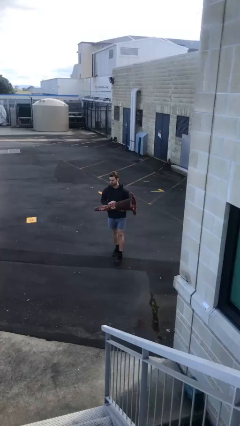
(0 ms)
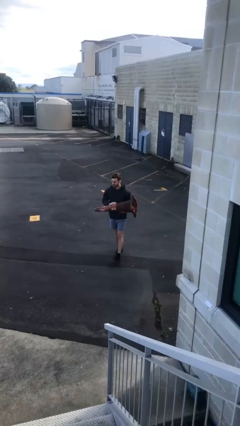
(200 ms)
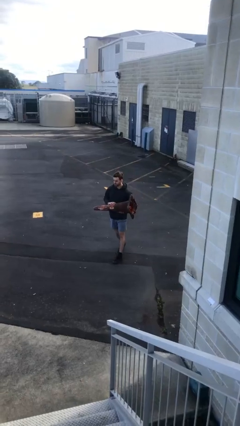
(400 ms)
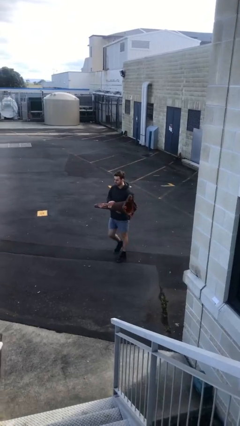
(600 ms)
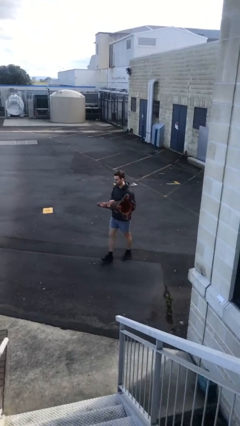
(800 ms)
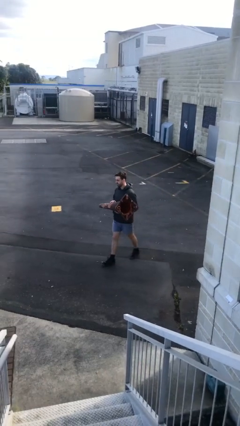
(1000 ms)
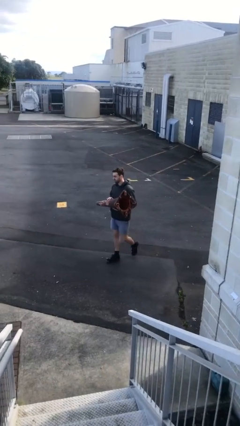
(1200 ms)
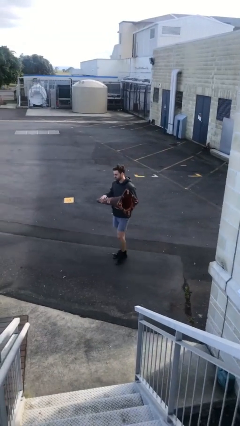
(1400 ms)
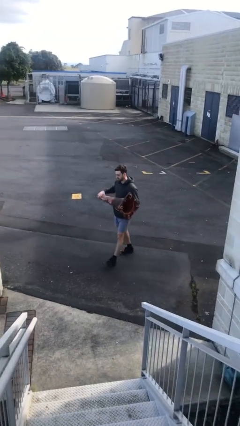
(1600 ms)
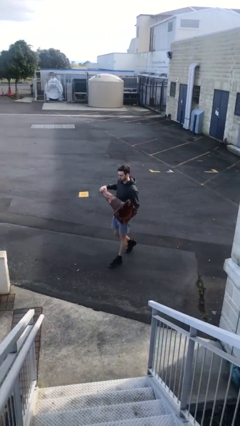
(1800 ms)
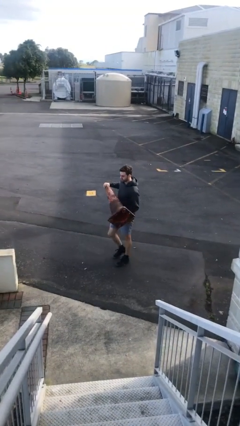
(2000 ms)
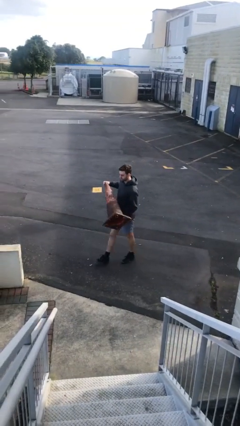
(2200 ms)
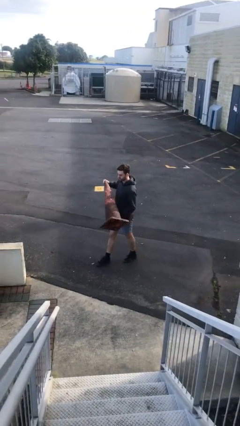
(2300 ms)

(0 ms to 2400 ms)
person carries heavy object

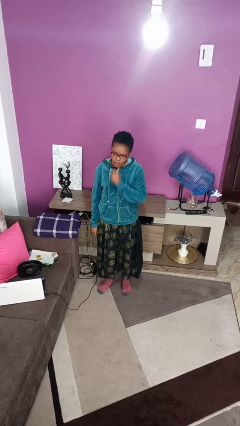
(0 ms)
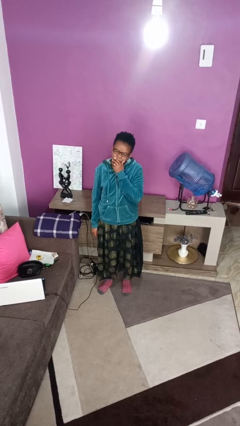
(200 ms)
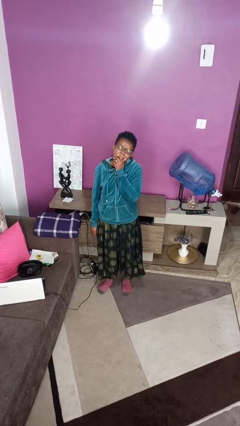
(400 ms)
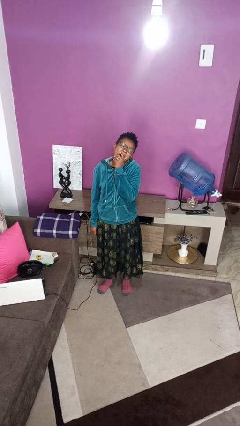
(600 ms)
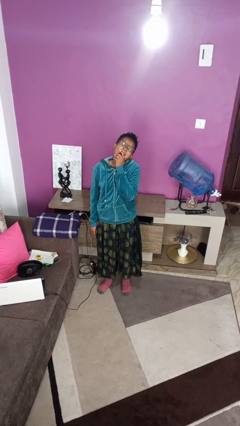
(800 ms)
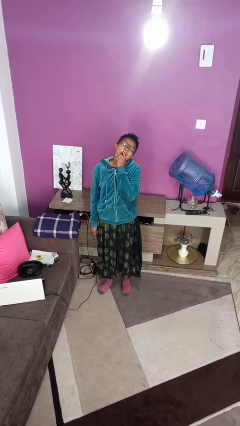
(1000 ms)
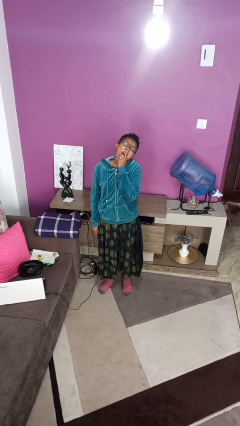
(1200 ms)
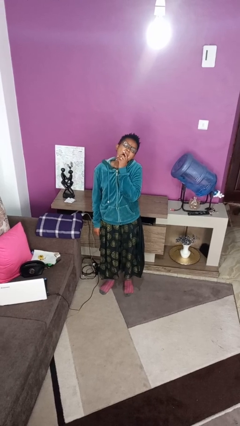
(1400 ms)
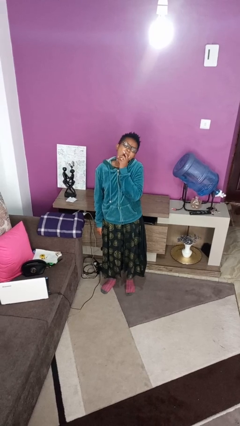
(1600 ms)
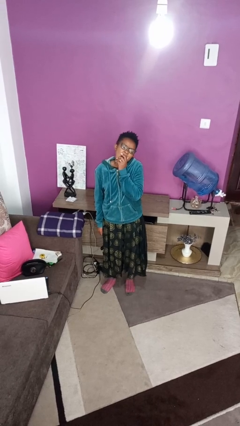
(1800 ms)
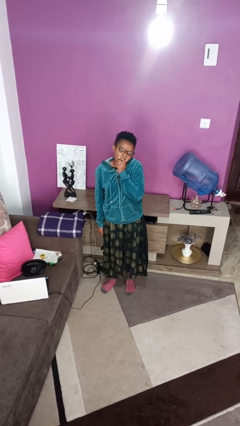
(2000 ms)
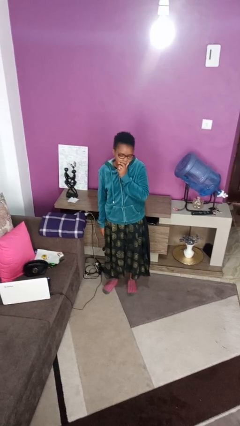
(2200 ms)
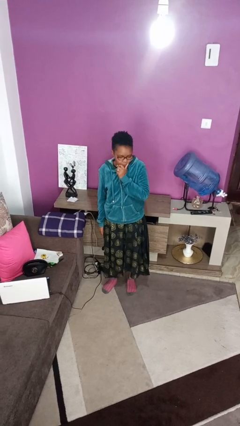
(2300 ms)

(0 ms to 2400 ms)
person yawns

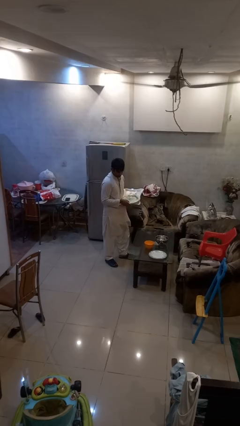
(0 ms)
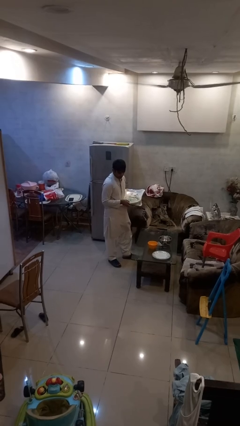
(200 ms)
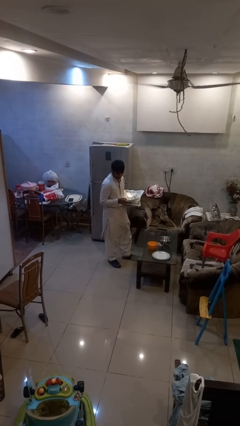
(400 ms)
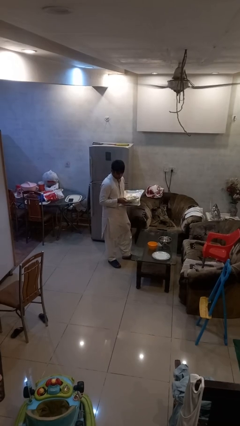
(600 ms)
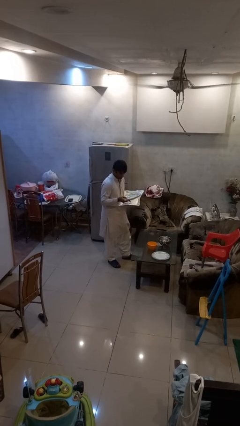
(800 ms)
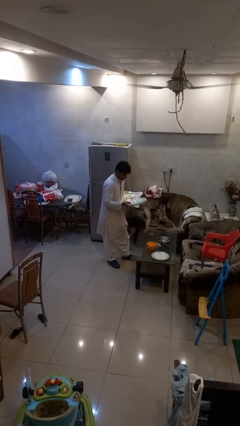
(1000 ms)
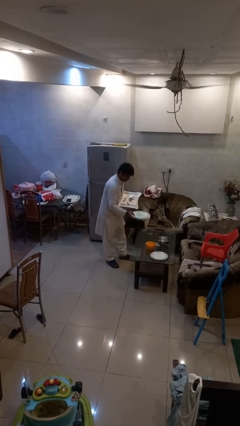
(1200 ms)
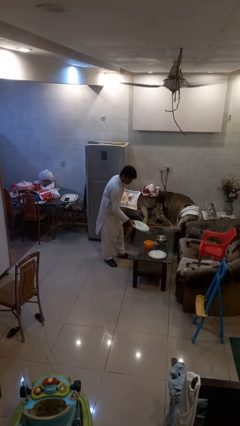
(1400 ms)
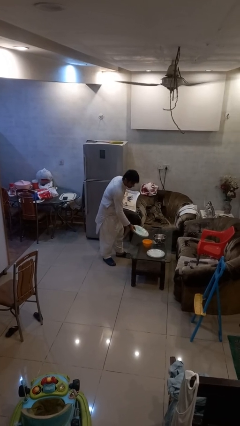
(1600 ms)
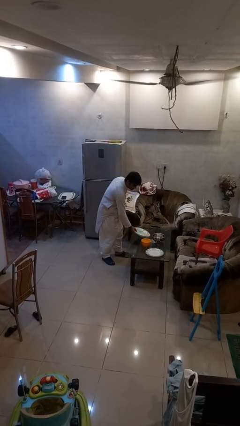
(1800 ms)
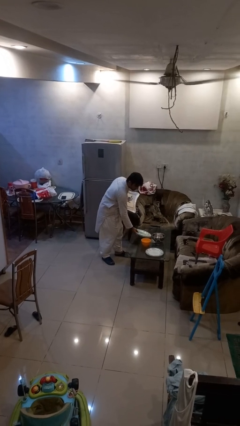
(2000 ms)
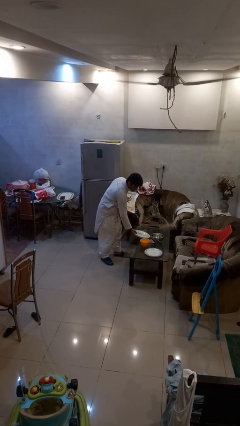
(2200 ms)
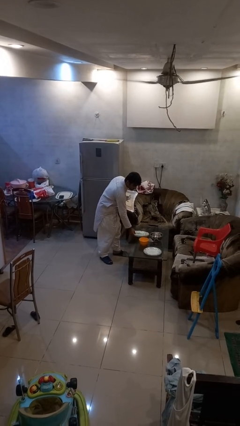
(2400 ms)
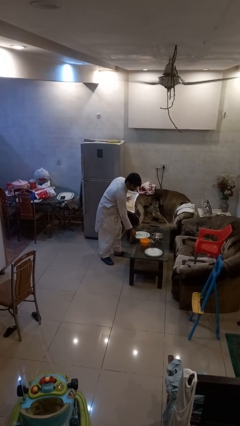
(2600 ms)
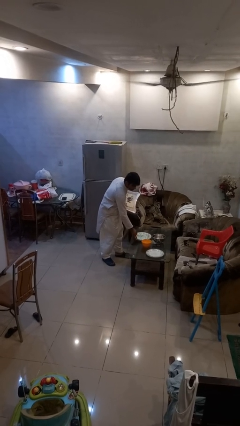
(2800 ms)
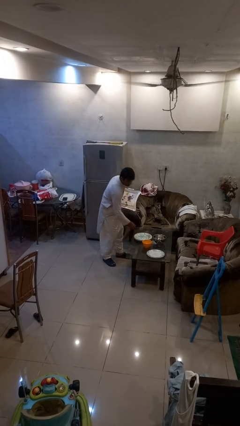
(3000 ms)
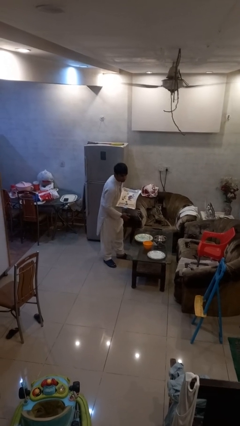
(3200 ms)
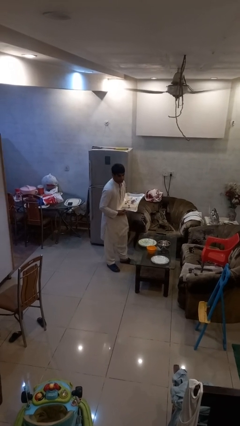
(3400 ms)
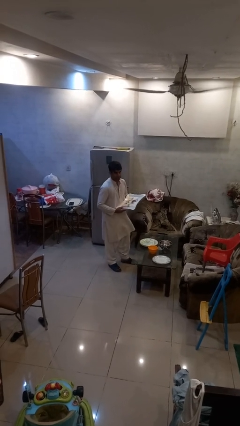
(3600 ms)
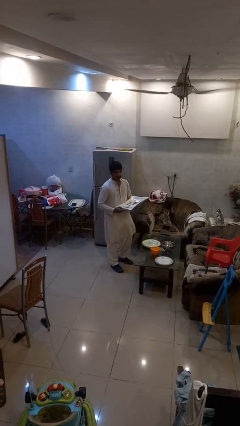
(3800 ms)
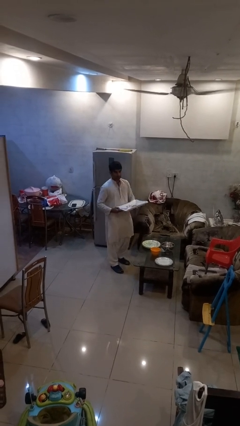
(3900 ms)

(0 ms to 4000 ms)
person sets table

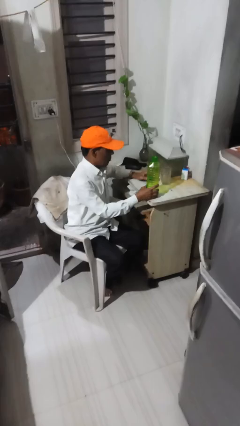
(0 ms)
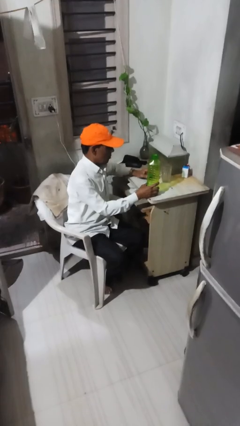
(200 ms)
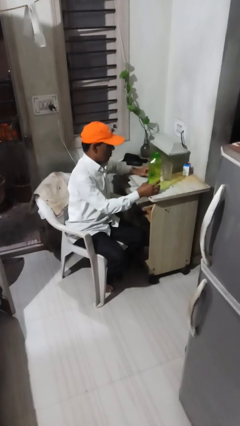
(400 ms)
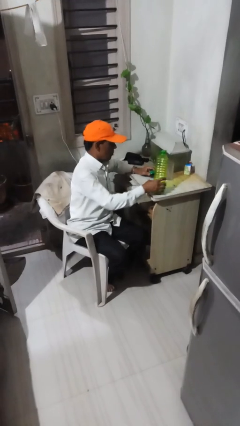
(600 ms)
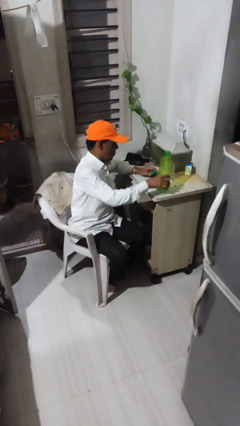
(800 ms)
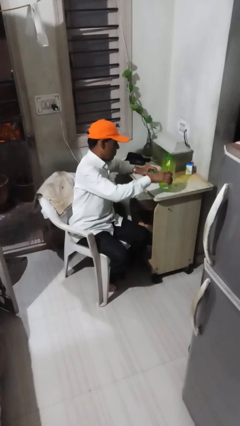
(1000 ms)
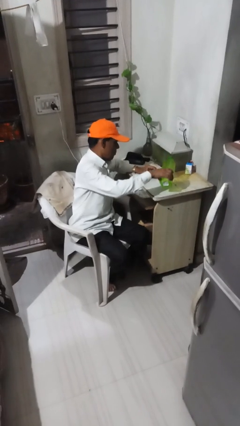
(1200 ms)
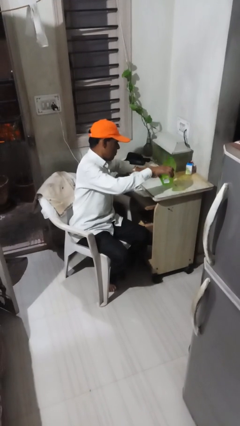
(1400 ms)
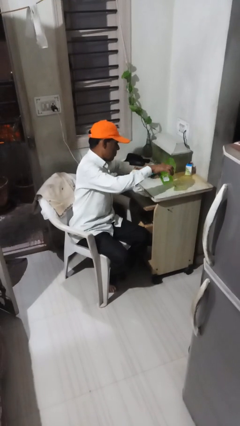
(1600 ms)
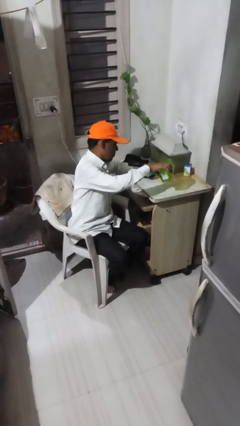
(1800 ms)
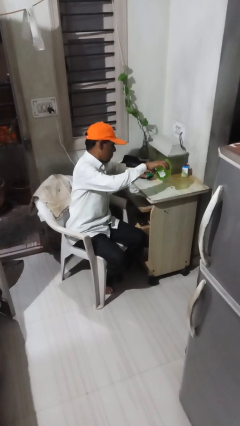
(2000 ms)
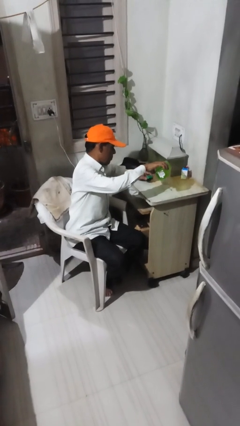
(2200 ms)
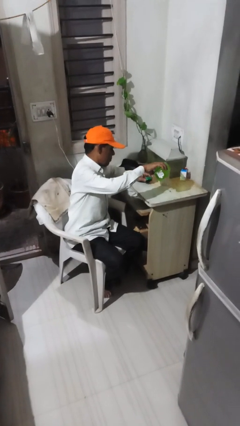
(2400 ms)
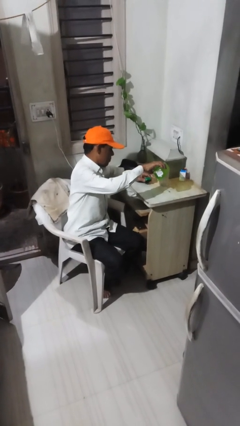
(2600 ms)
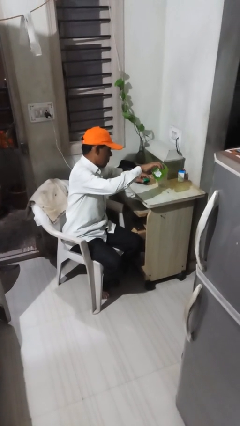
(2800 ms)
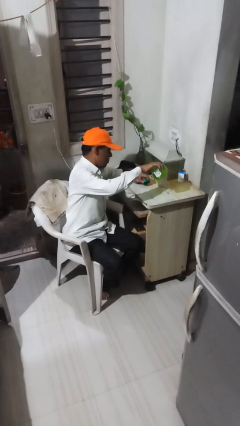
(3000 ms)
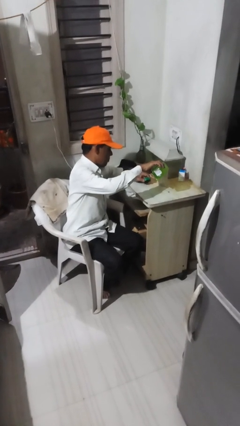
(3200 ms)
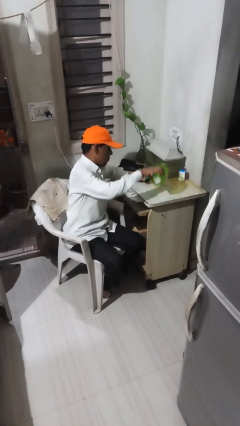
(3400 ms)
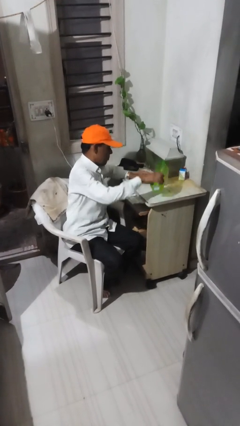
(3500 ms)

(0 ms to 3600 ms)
person pours liquid into cup

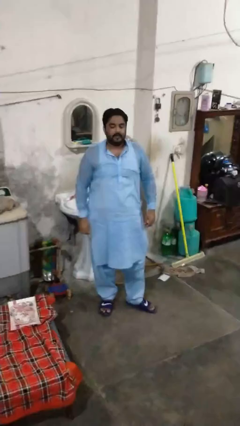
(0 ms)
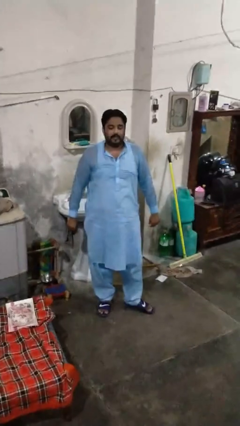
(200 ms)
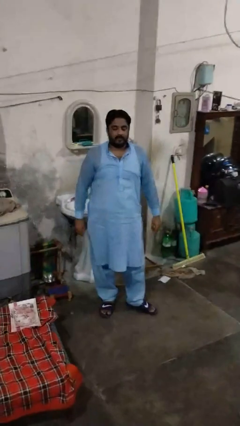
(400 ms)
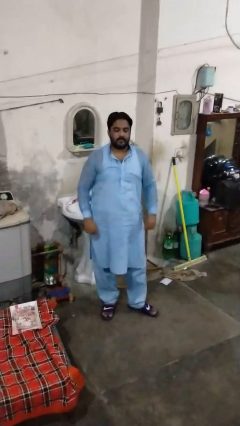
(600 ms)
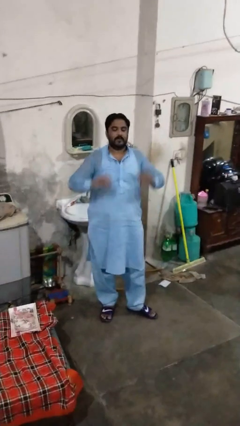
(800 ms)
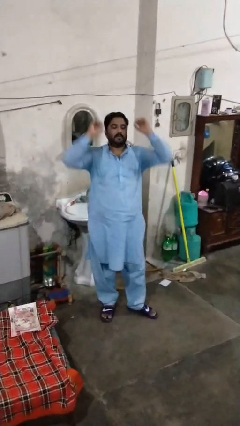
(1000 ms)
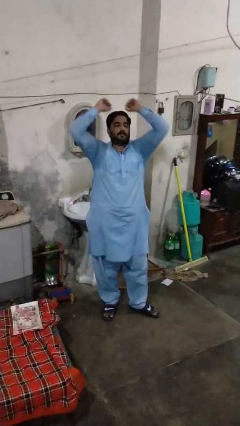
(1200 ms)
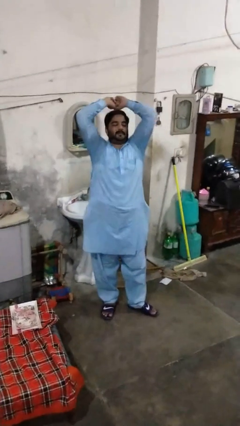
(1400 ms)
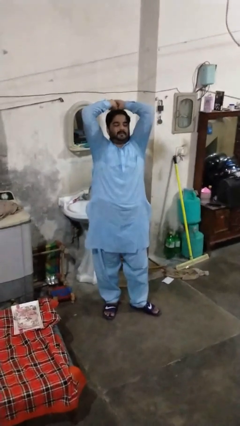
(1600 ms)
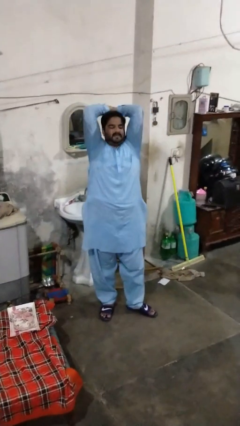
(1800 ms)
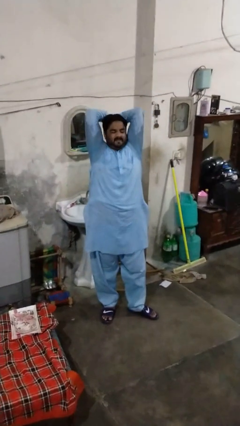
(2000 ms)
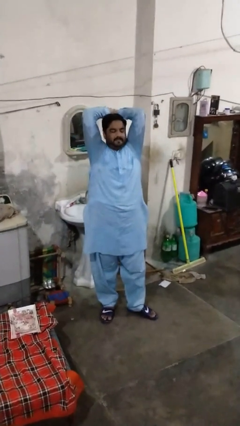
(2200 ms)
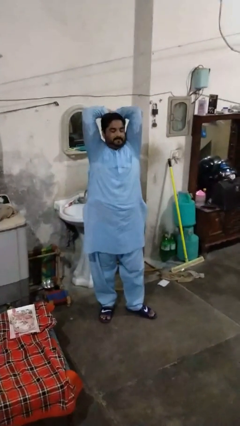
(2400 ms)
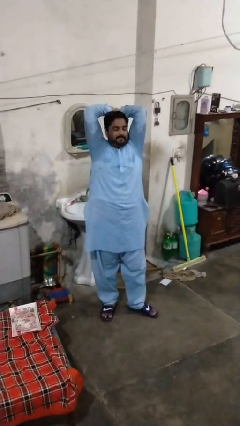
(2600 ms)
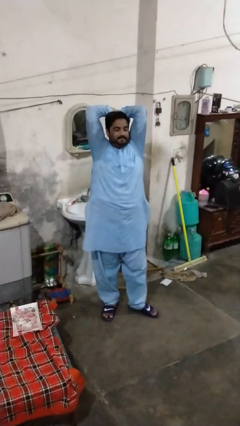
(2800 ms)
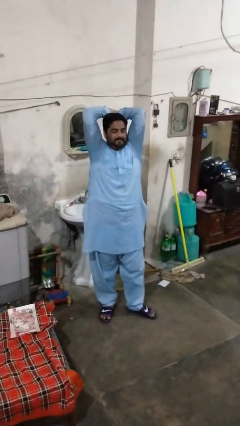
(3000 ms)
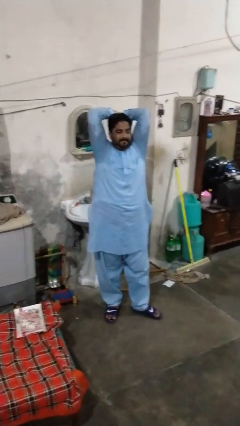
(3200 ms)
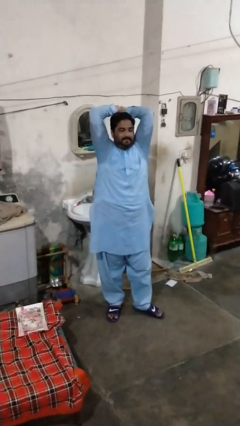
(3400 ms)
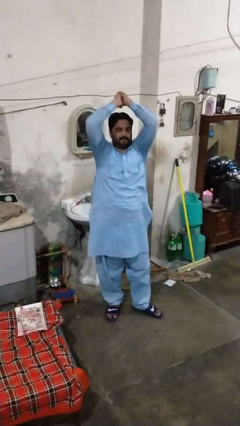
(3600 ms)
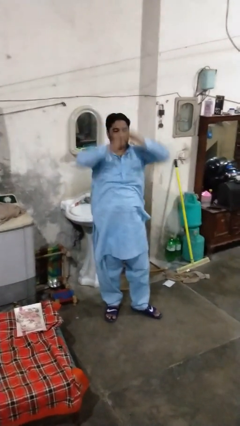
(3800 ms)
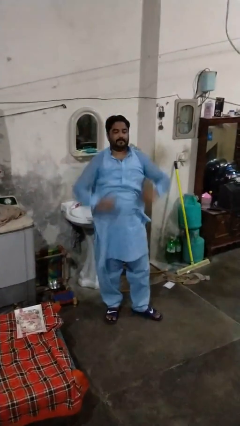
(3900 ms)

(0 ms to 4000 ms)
person stretches arms over head

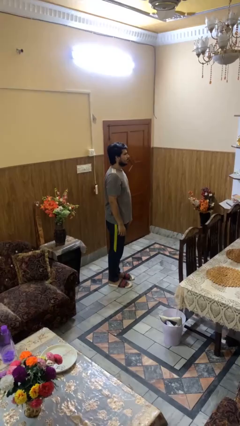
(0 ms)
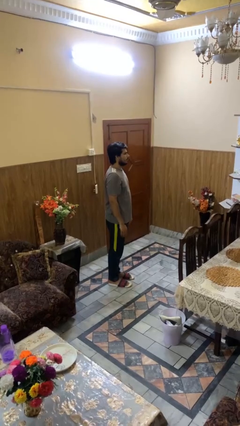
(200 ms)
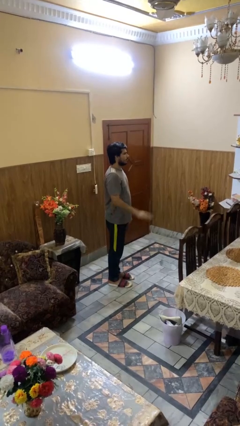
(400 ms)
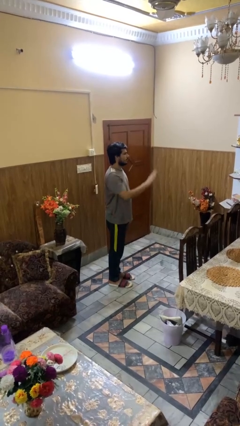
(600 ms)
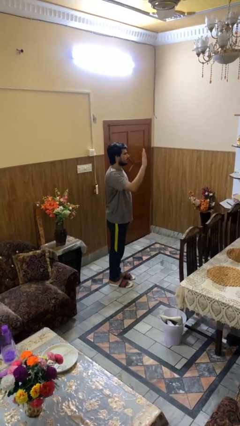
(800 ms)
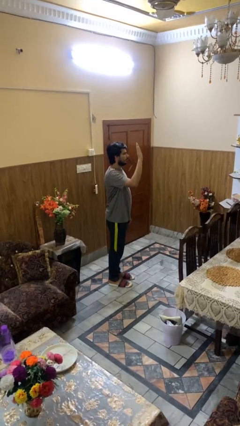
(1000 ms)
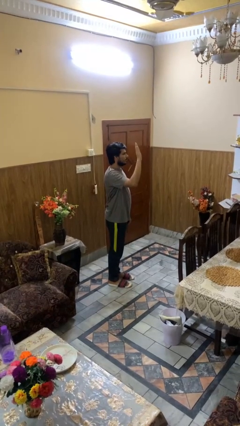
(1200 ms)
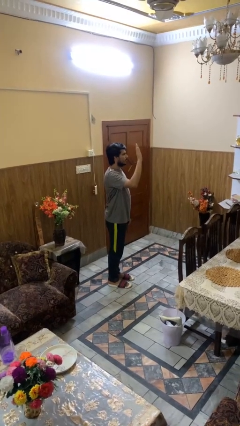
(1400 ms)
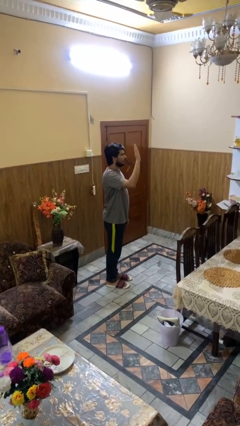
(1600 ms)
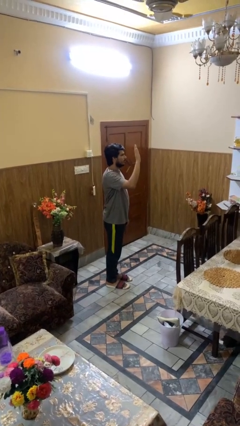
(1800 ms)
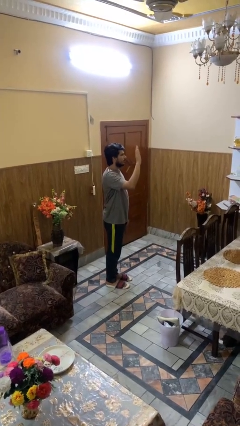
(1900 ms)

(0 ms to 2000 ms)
person gestures raise hand
